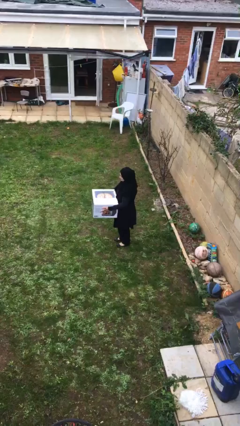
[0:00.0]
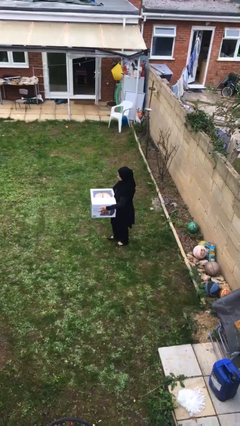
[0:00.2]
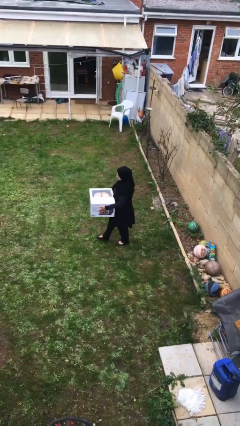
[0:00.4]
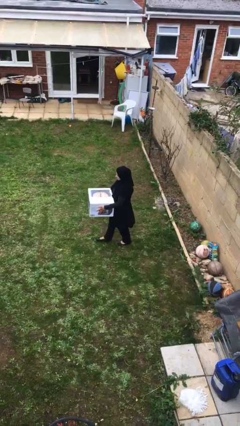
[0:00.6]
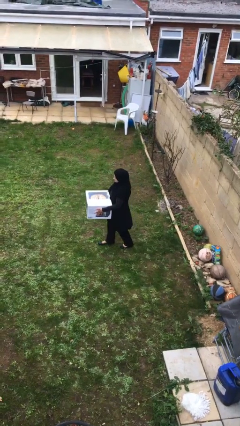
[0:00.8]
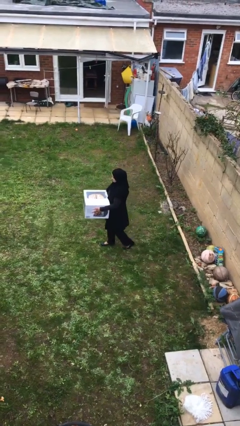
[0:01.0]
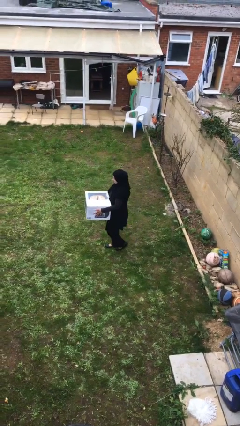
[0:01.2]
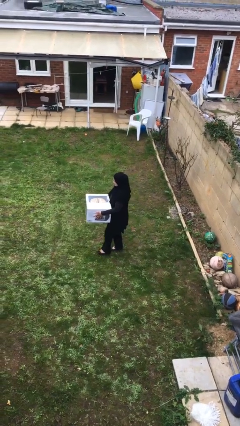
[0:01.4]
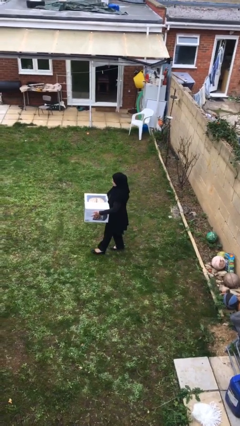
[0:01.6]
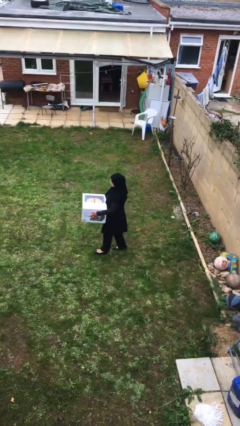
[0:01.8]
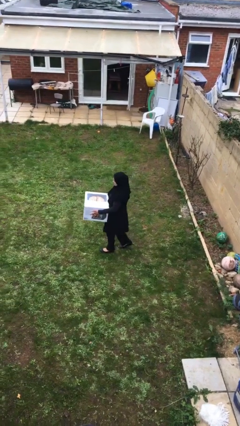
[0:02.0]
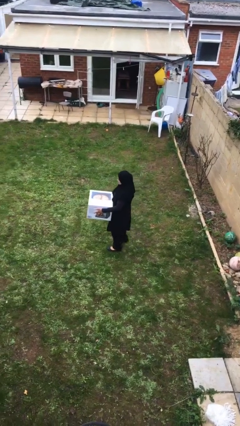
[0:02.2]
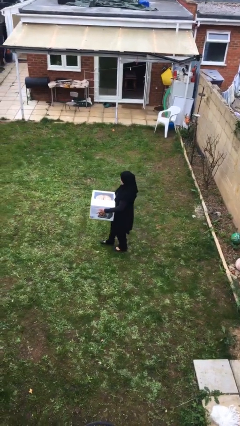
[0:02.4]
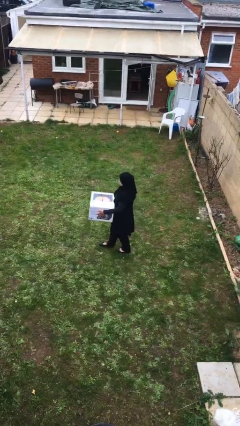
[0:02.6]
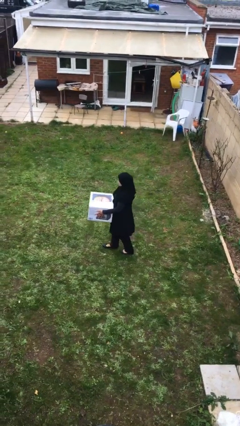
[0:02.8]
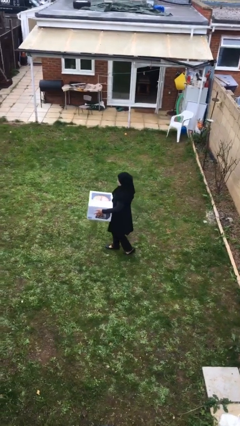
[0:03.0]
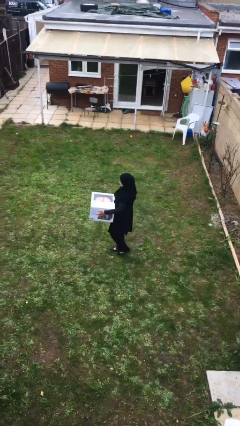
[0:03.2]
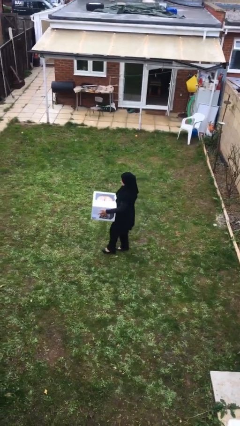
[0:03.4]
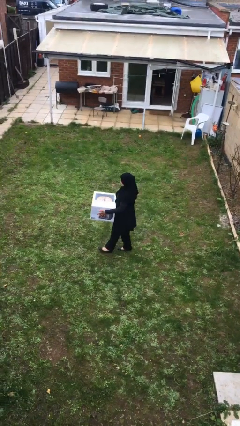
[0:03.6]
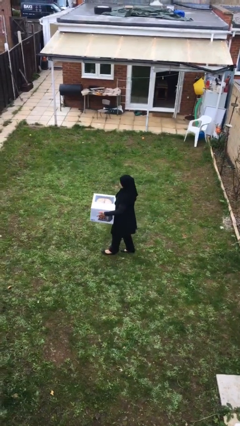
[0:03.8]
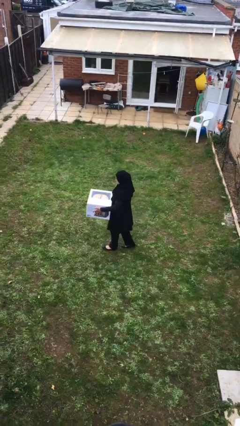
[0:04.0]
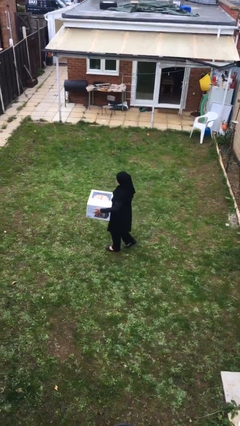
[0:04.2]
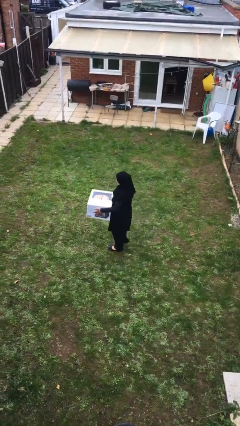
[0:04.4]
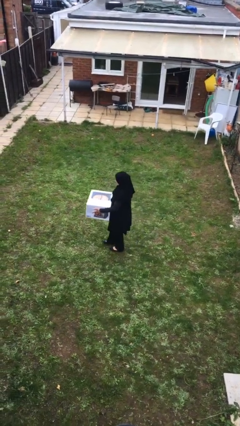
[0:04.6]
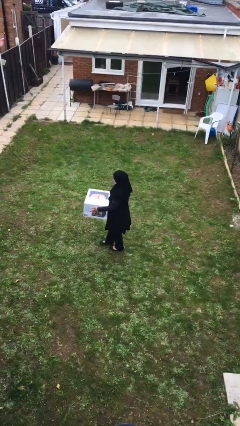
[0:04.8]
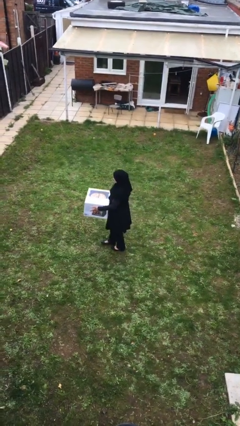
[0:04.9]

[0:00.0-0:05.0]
person carries heavy object

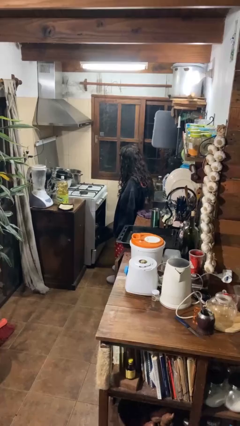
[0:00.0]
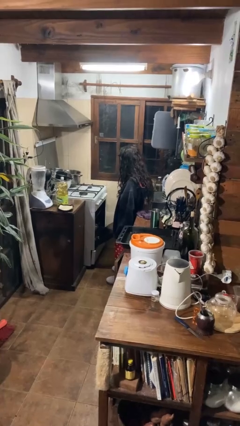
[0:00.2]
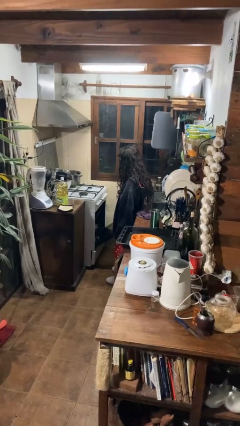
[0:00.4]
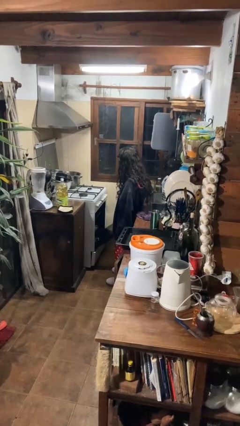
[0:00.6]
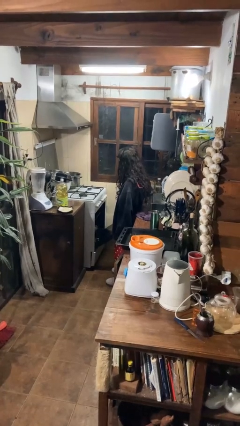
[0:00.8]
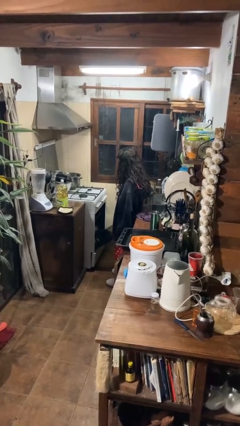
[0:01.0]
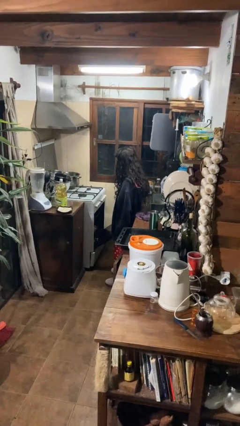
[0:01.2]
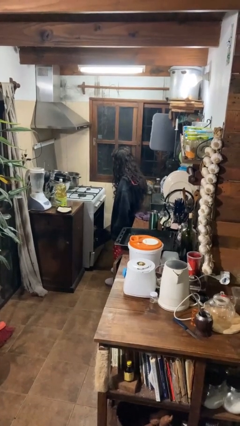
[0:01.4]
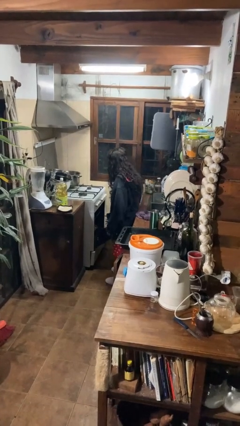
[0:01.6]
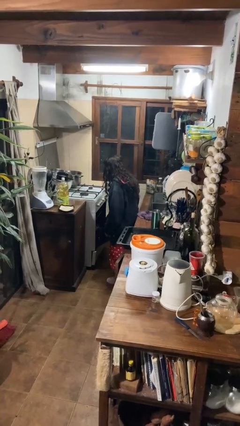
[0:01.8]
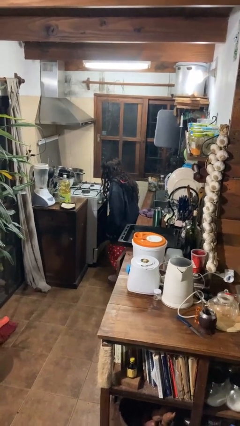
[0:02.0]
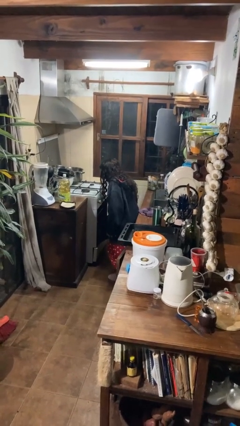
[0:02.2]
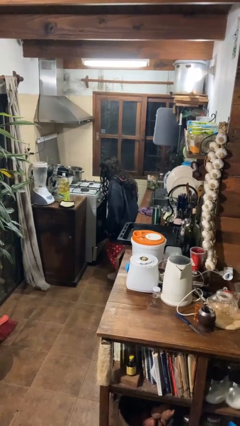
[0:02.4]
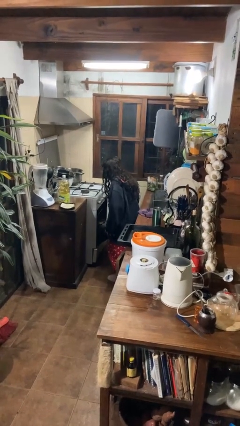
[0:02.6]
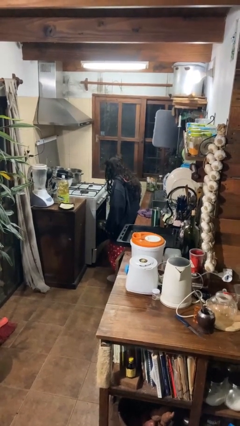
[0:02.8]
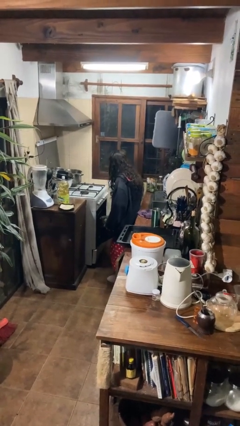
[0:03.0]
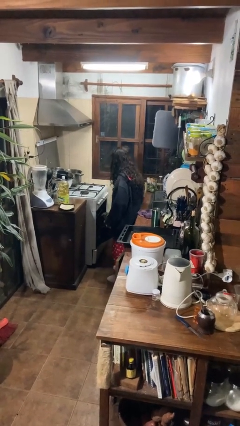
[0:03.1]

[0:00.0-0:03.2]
person takes object from oven

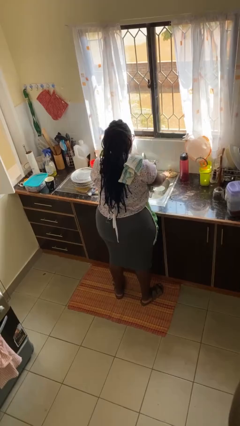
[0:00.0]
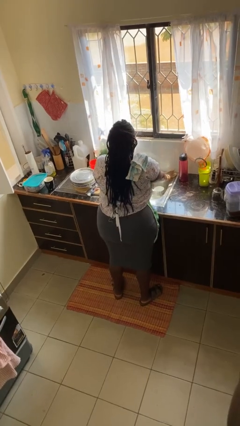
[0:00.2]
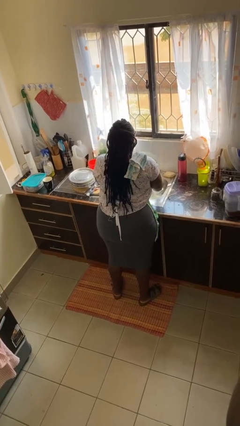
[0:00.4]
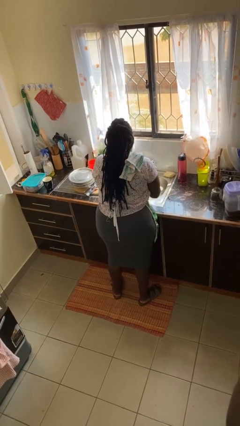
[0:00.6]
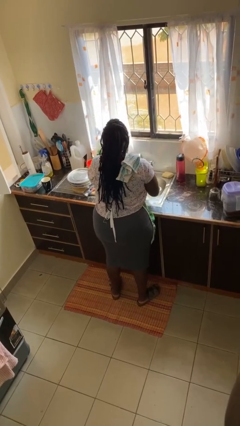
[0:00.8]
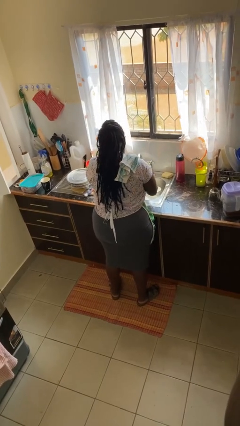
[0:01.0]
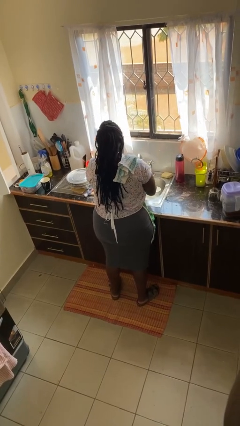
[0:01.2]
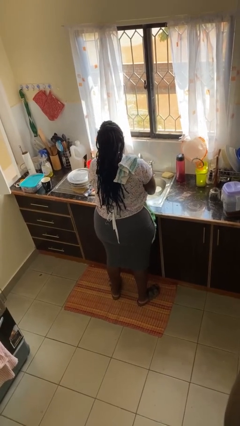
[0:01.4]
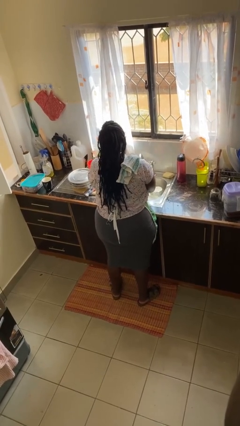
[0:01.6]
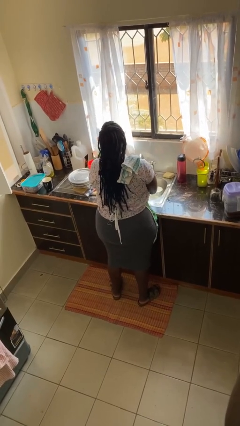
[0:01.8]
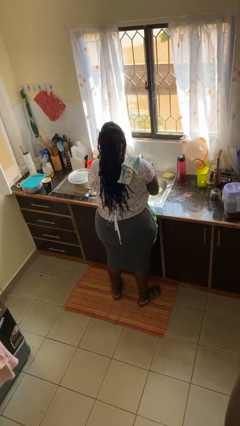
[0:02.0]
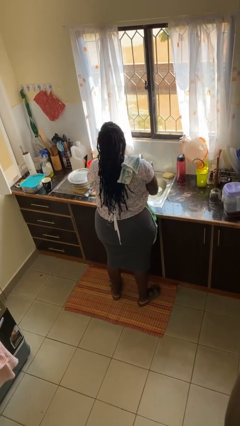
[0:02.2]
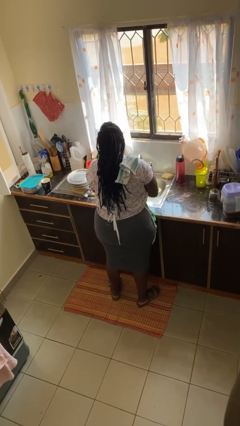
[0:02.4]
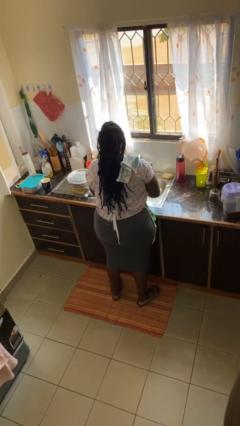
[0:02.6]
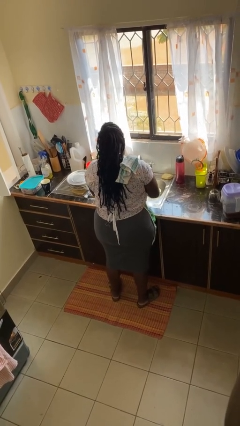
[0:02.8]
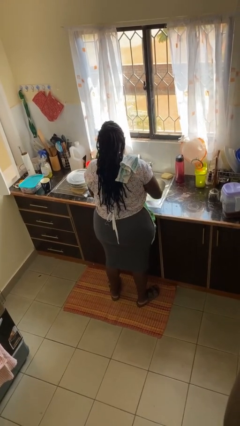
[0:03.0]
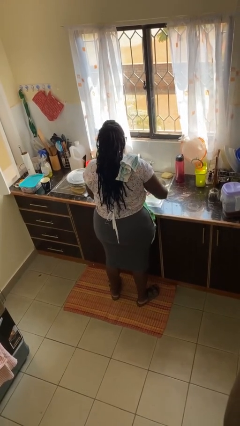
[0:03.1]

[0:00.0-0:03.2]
person washes hands

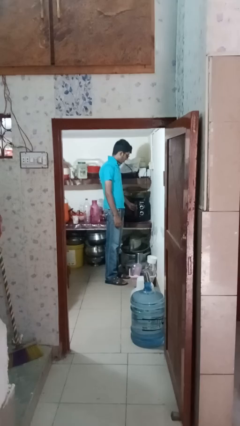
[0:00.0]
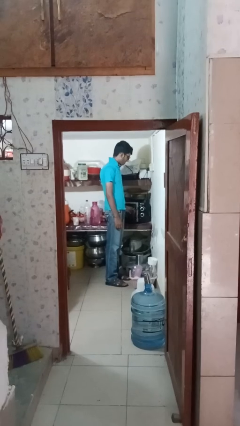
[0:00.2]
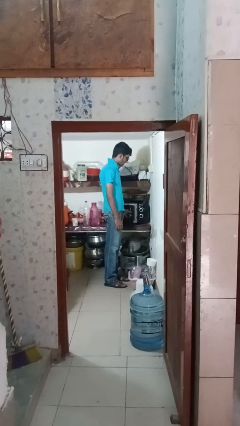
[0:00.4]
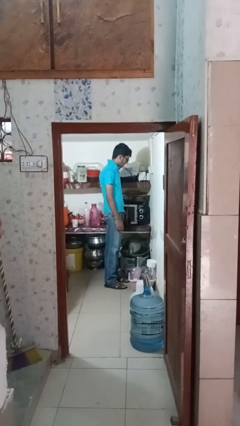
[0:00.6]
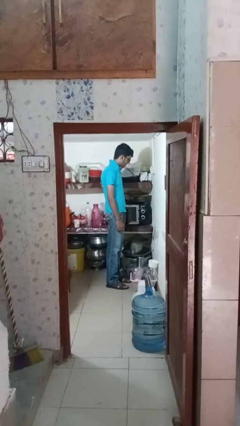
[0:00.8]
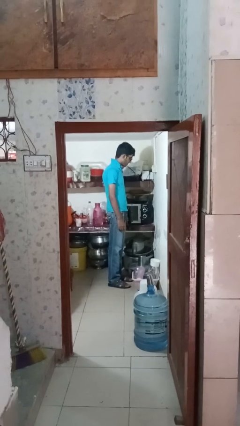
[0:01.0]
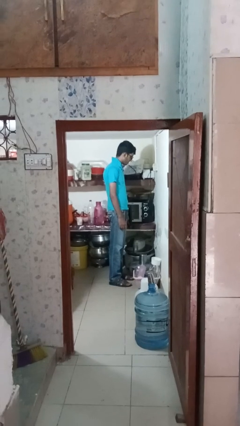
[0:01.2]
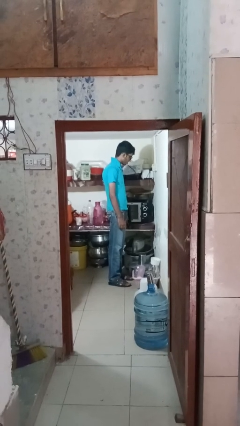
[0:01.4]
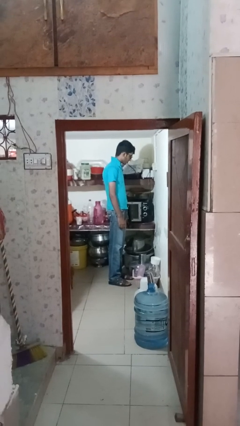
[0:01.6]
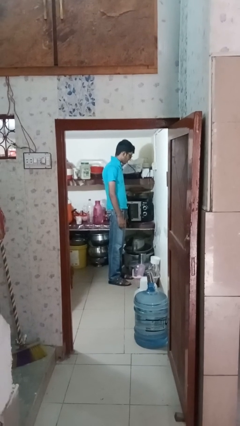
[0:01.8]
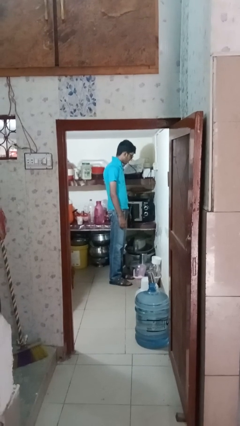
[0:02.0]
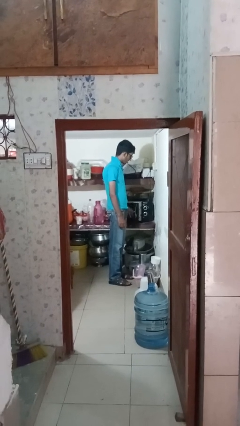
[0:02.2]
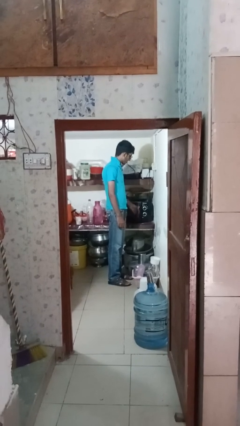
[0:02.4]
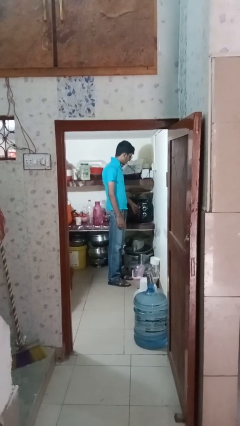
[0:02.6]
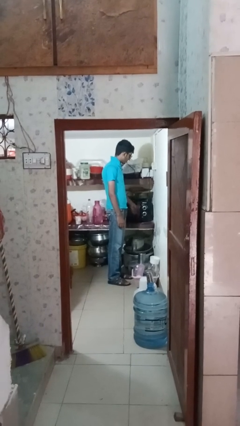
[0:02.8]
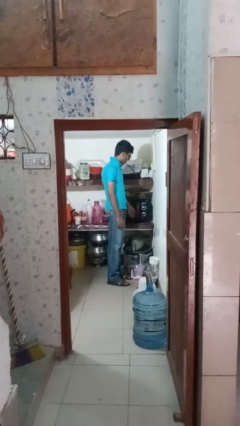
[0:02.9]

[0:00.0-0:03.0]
person opens oven door

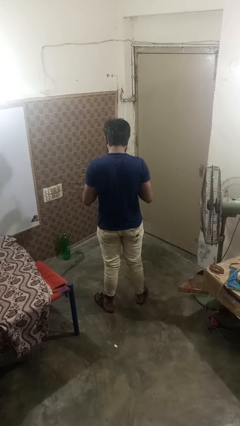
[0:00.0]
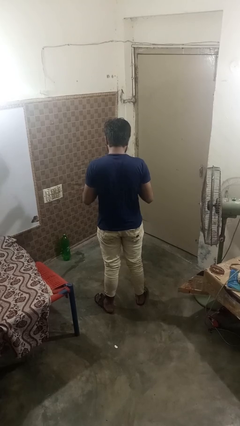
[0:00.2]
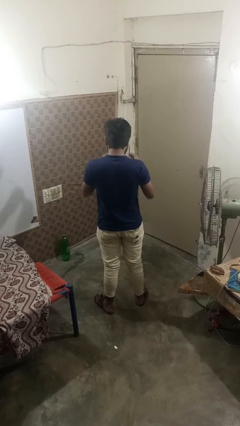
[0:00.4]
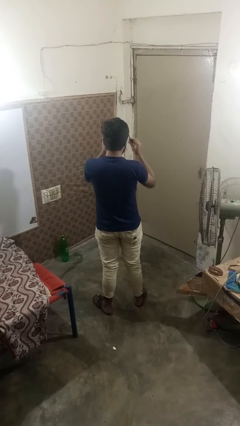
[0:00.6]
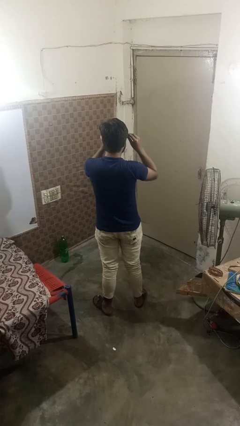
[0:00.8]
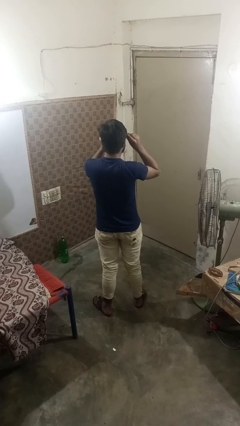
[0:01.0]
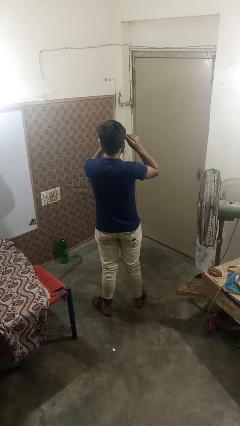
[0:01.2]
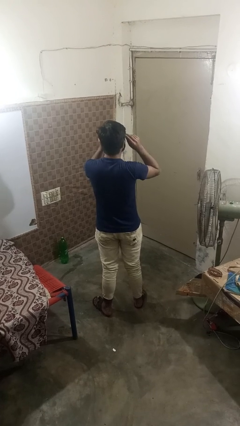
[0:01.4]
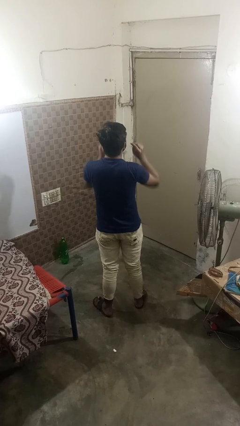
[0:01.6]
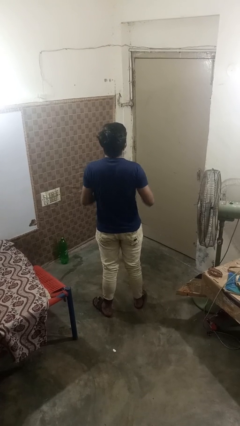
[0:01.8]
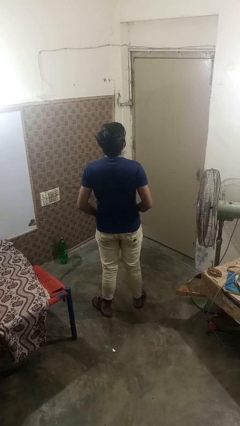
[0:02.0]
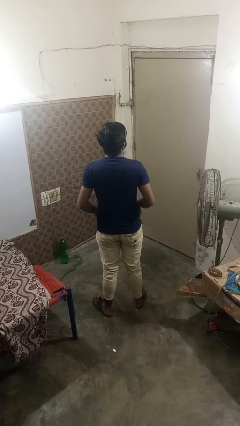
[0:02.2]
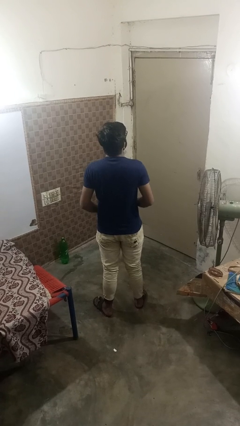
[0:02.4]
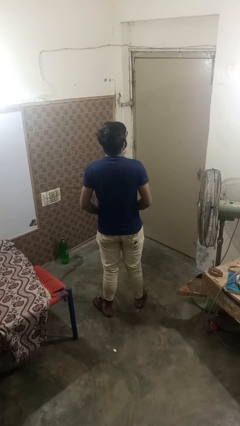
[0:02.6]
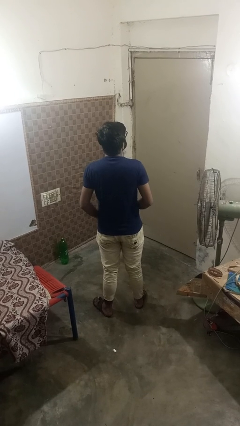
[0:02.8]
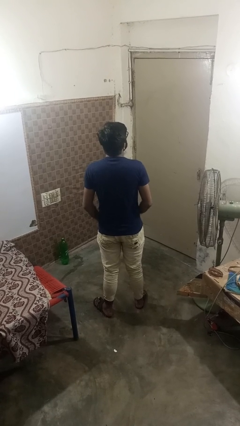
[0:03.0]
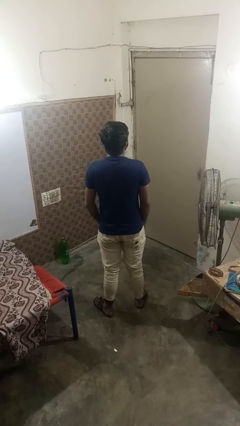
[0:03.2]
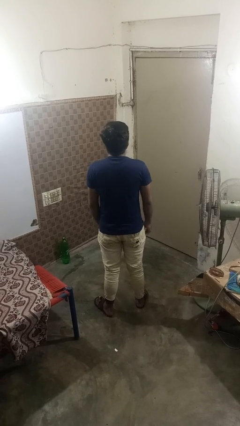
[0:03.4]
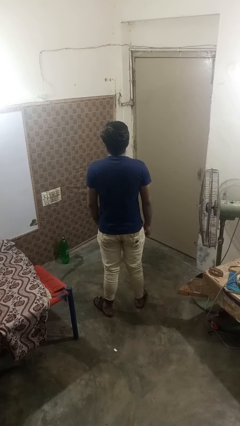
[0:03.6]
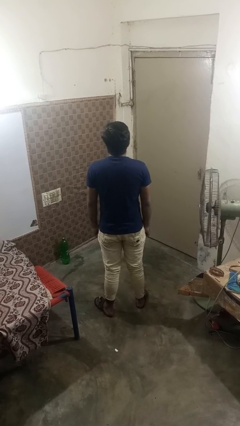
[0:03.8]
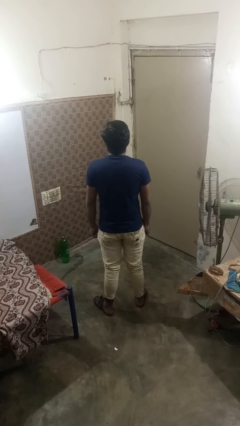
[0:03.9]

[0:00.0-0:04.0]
person puts on glasses
